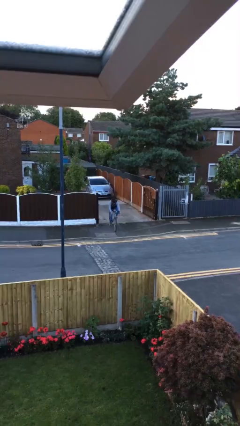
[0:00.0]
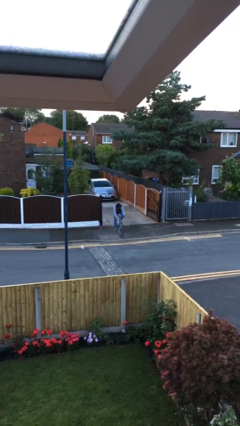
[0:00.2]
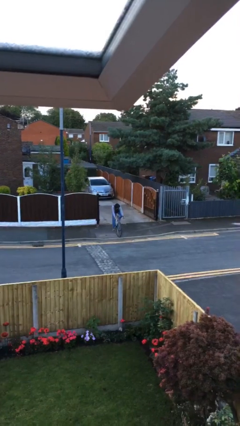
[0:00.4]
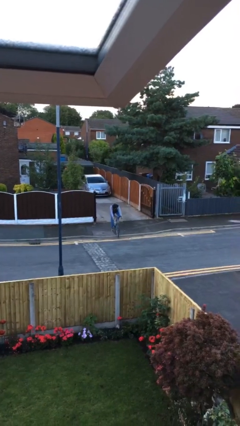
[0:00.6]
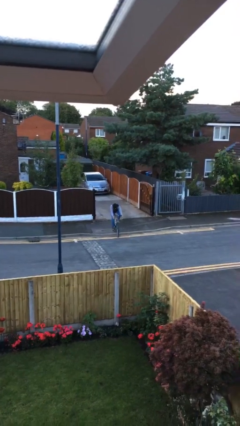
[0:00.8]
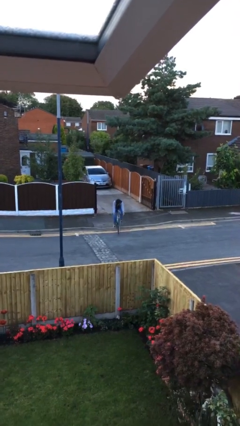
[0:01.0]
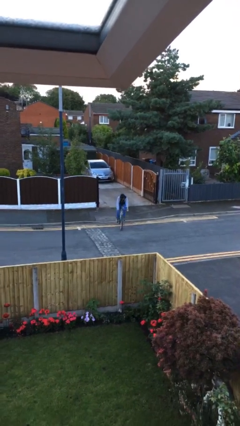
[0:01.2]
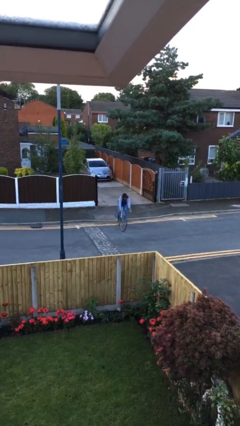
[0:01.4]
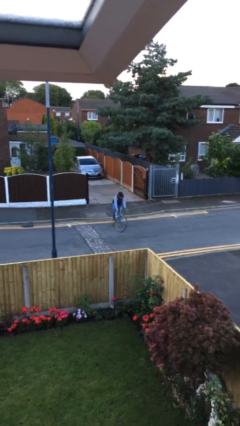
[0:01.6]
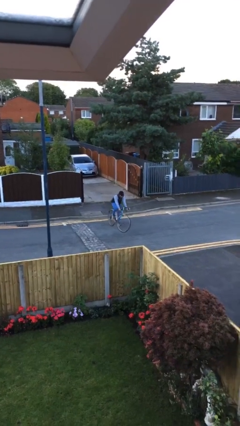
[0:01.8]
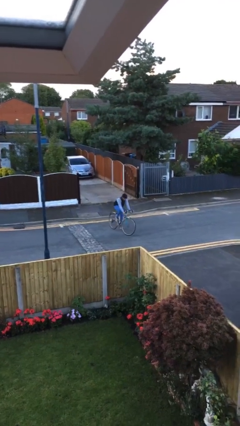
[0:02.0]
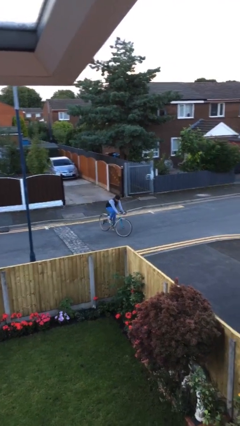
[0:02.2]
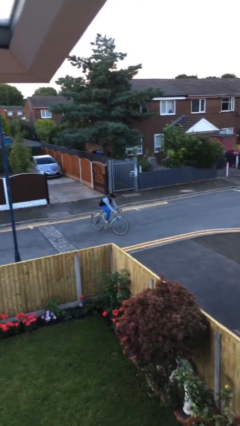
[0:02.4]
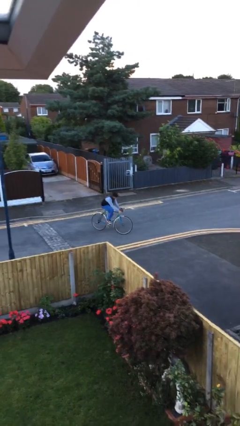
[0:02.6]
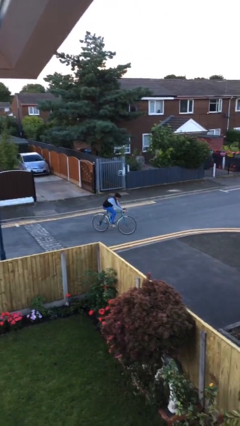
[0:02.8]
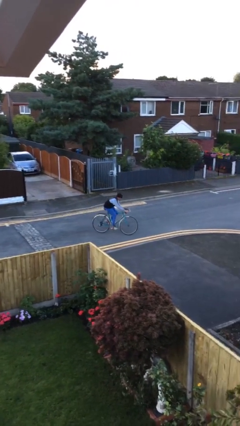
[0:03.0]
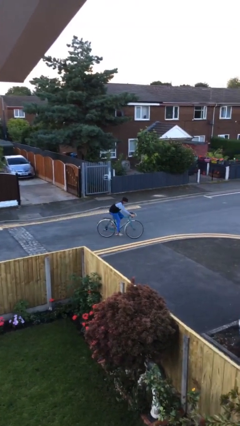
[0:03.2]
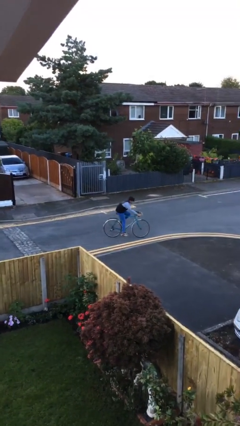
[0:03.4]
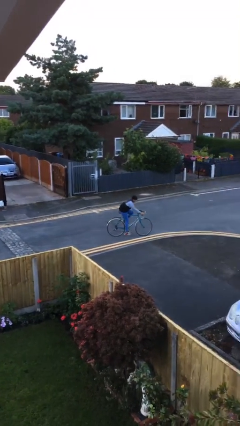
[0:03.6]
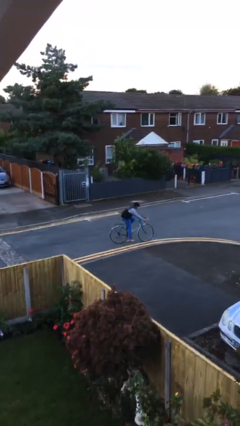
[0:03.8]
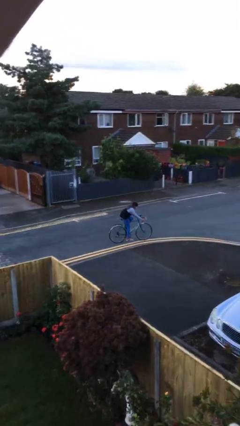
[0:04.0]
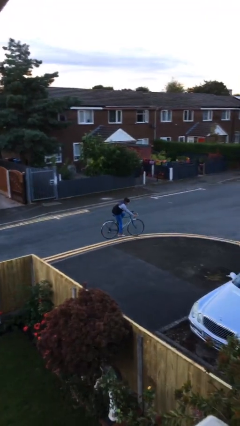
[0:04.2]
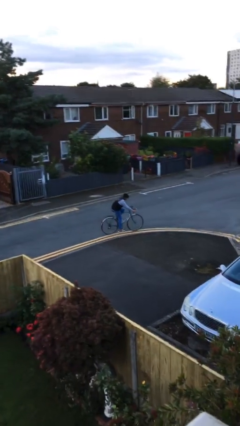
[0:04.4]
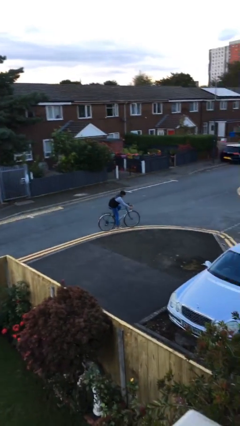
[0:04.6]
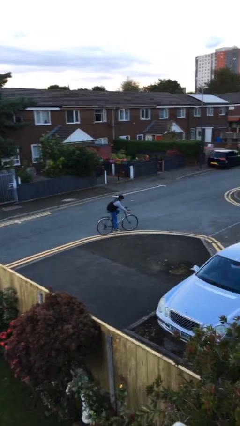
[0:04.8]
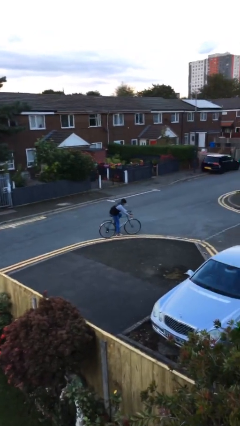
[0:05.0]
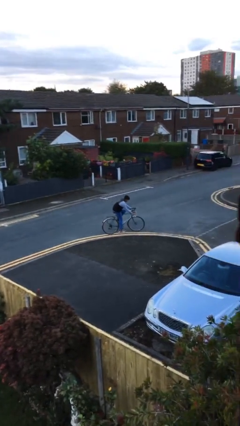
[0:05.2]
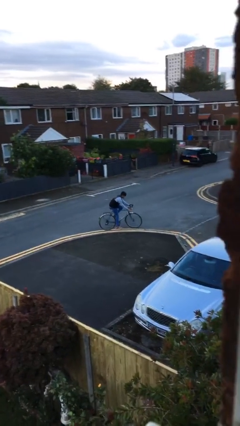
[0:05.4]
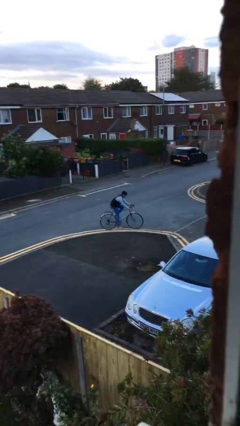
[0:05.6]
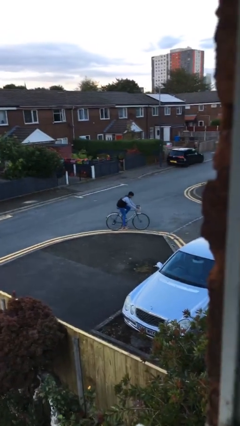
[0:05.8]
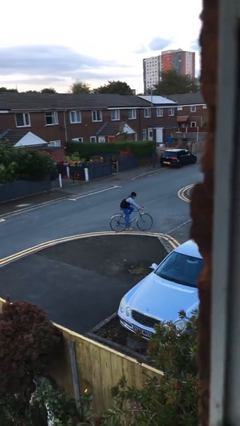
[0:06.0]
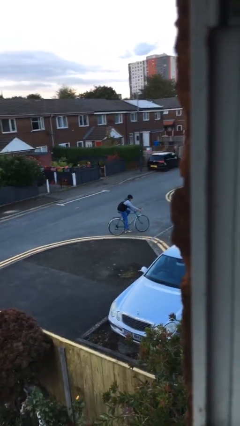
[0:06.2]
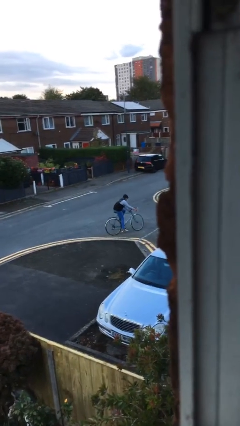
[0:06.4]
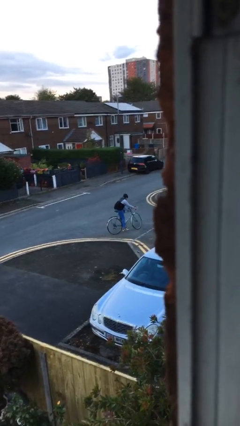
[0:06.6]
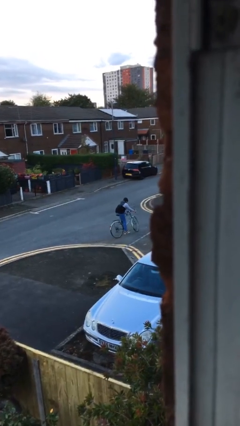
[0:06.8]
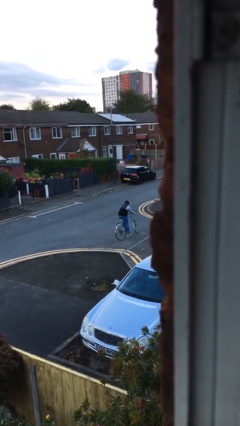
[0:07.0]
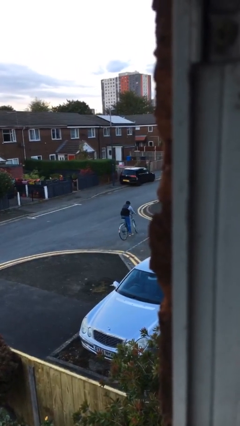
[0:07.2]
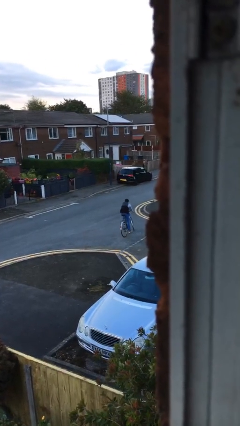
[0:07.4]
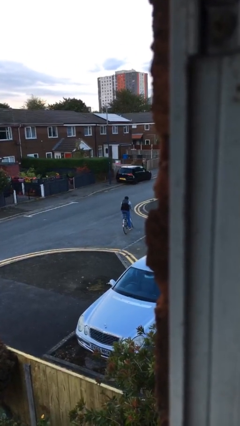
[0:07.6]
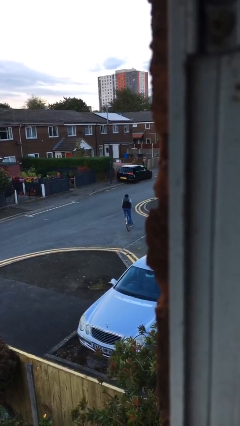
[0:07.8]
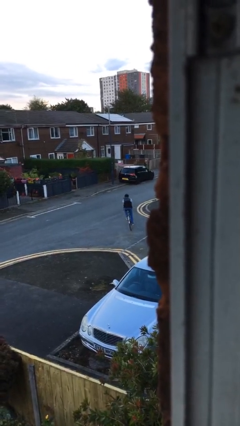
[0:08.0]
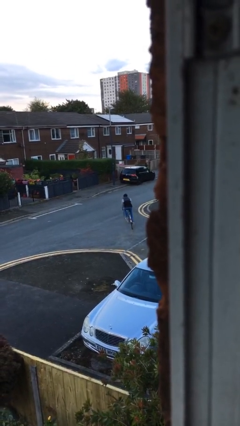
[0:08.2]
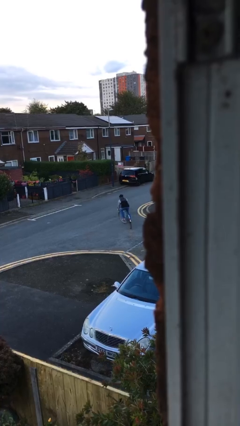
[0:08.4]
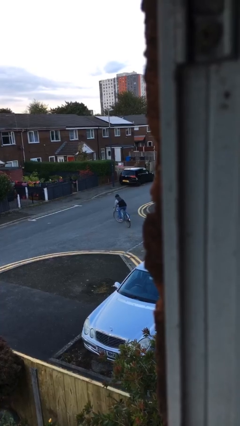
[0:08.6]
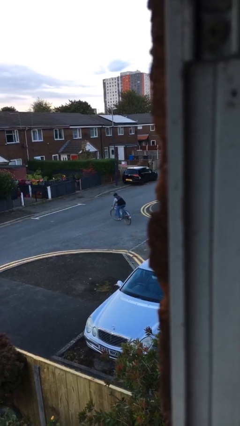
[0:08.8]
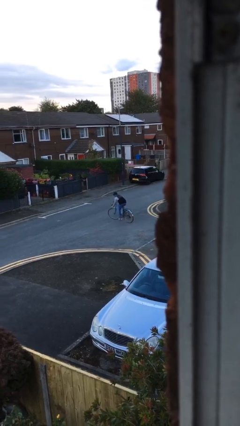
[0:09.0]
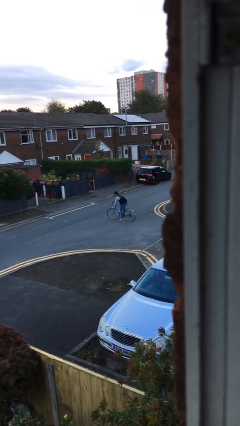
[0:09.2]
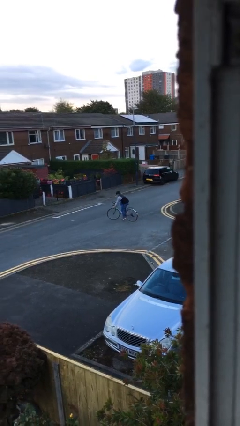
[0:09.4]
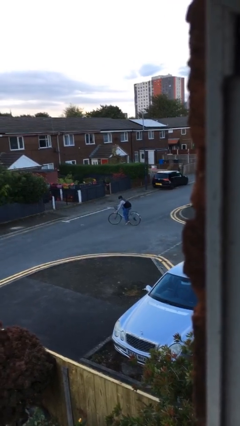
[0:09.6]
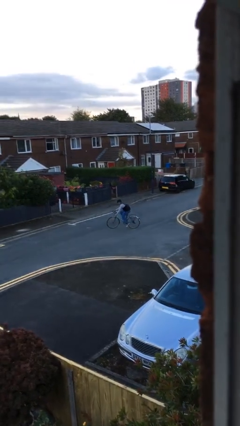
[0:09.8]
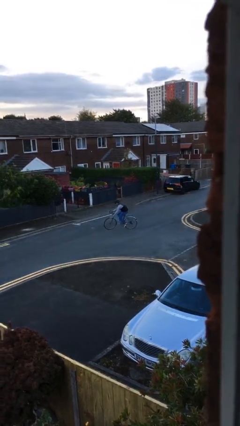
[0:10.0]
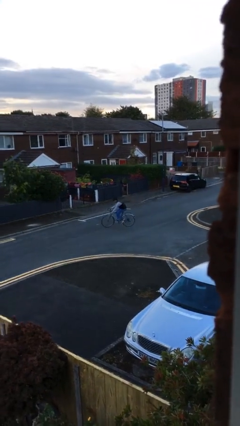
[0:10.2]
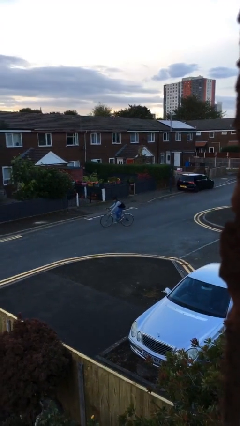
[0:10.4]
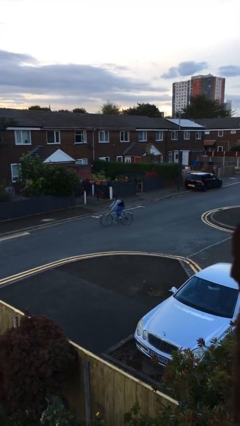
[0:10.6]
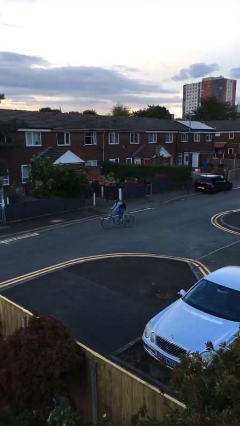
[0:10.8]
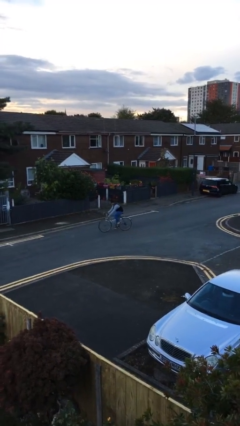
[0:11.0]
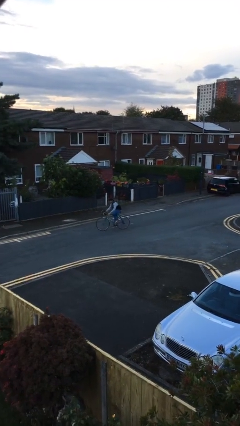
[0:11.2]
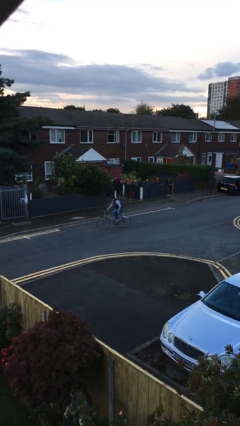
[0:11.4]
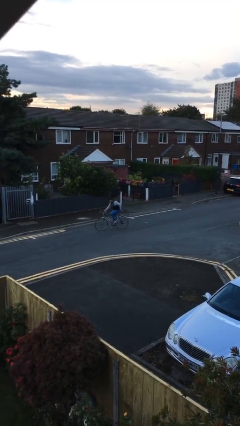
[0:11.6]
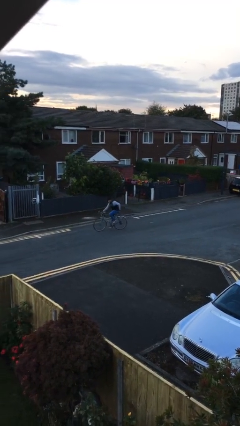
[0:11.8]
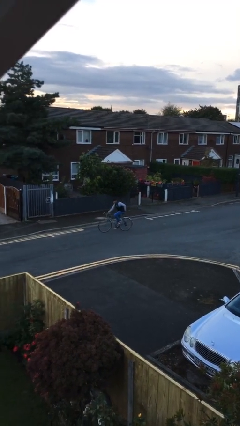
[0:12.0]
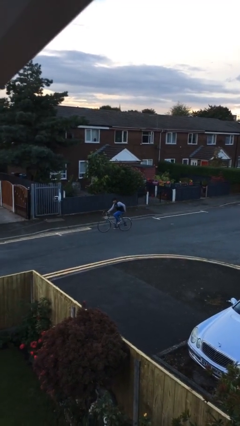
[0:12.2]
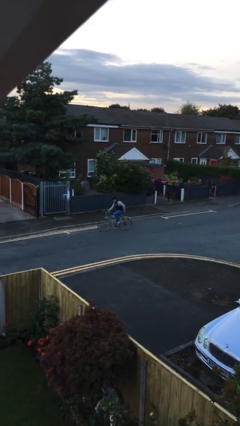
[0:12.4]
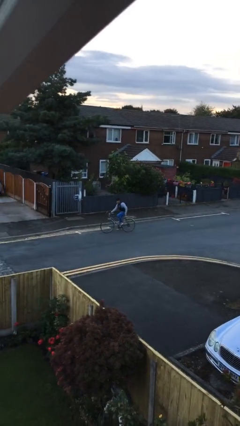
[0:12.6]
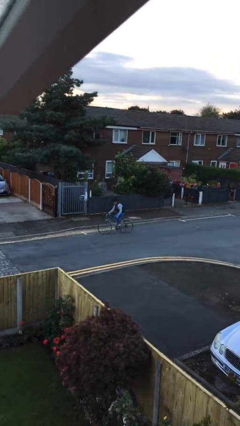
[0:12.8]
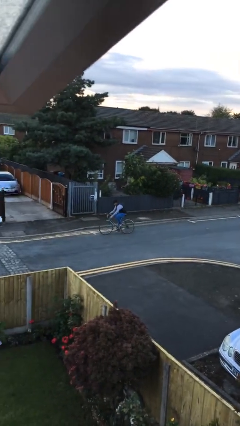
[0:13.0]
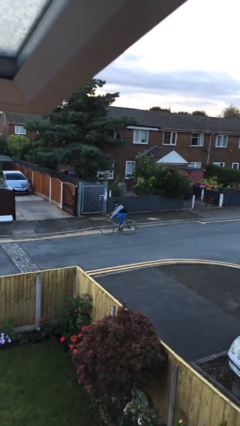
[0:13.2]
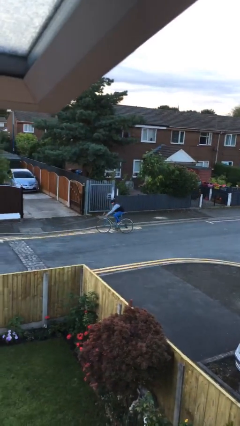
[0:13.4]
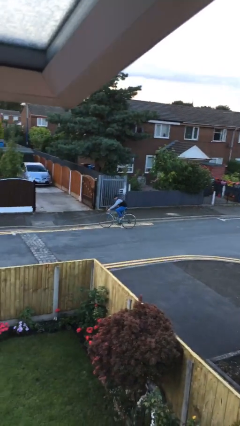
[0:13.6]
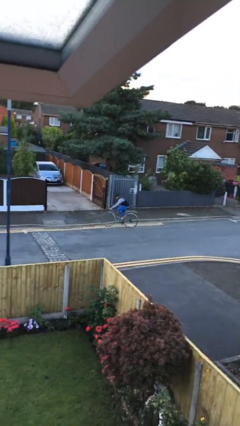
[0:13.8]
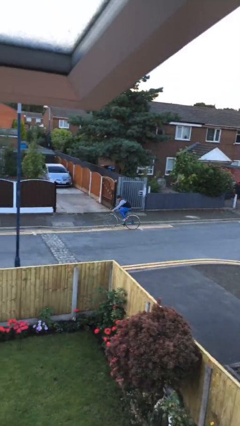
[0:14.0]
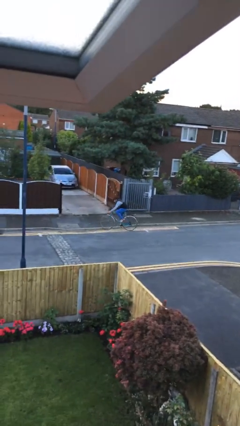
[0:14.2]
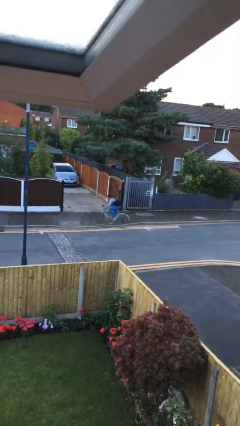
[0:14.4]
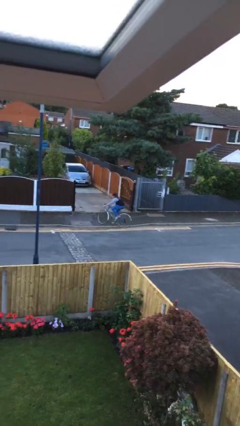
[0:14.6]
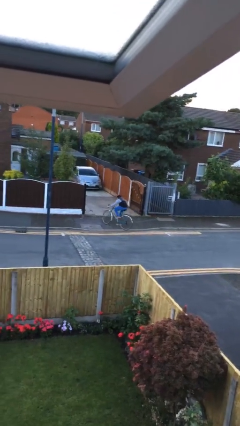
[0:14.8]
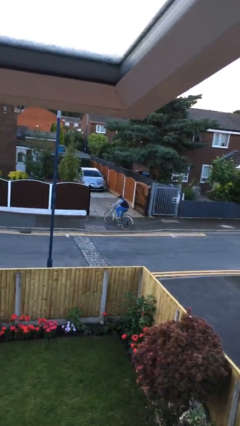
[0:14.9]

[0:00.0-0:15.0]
person rides bicycle

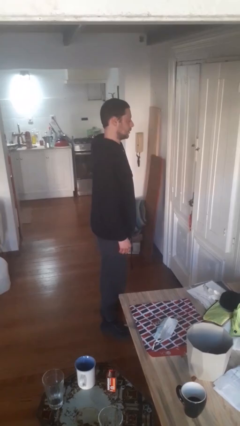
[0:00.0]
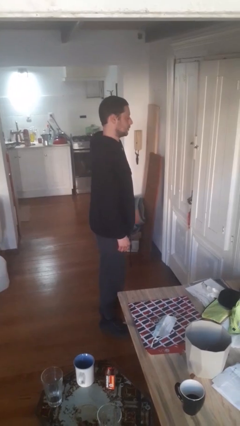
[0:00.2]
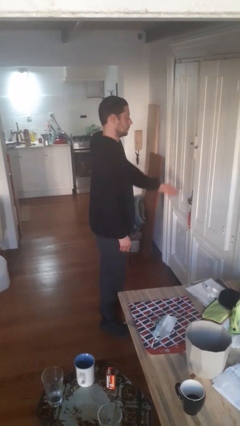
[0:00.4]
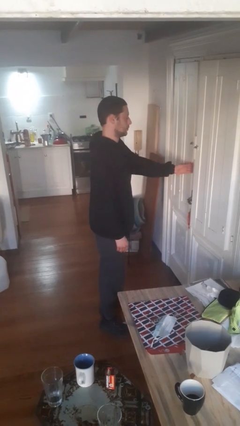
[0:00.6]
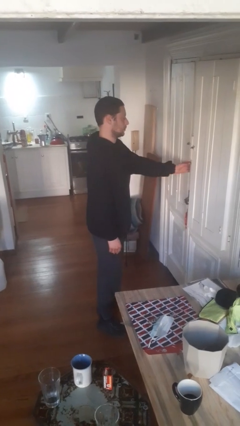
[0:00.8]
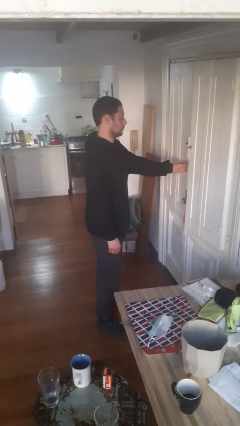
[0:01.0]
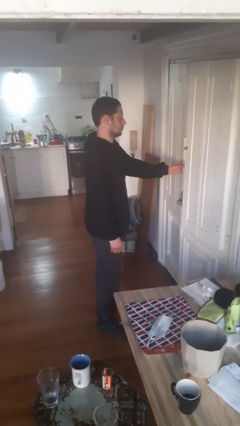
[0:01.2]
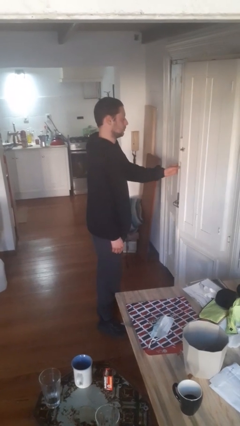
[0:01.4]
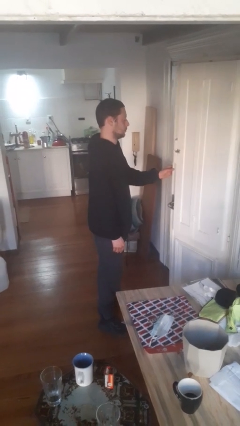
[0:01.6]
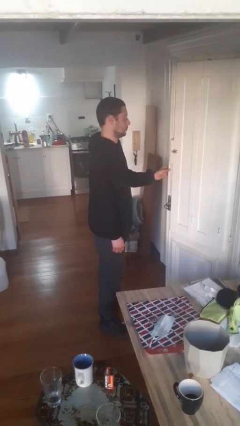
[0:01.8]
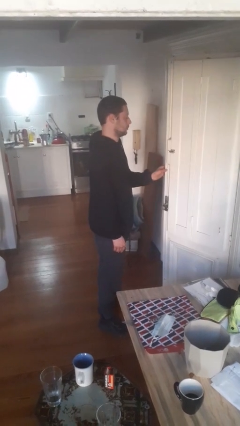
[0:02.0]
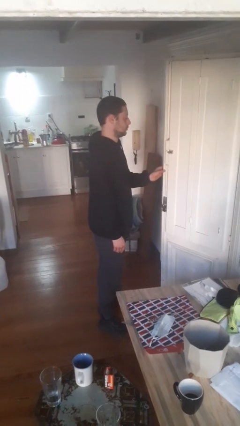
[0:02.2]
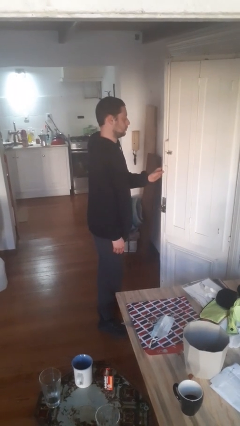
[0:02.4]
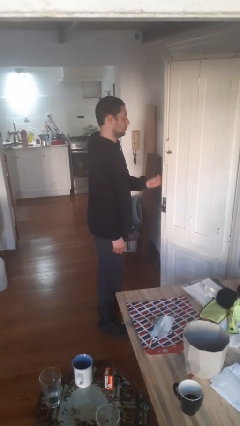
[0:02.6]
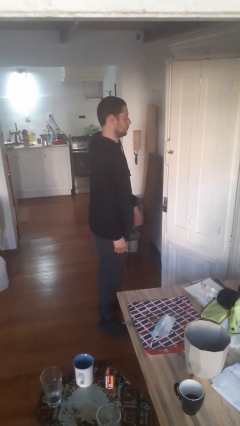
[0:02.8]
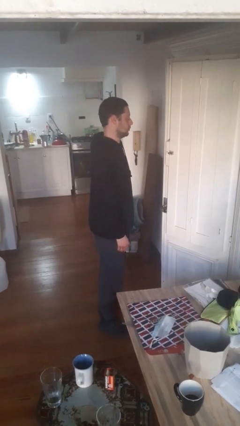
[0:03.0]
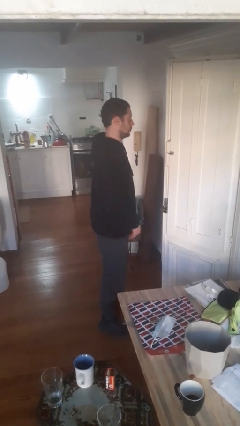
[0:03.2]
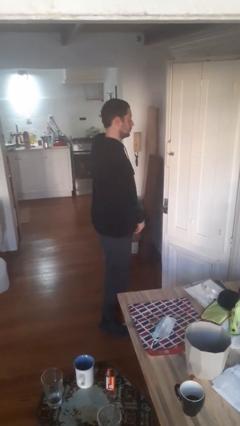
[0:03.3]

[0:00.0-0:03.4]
person opens facility door
